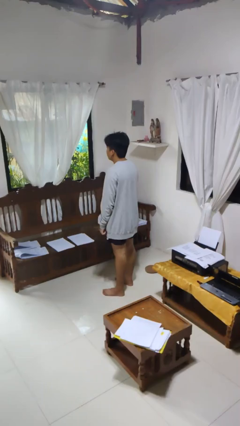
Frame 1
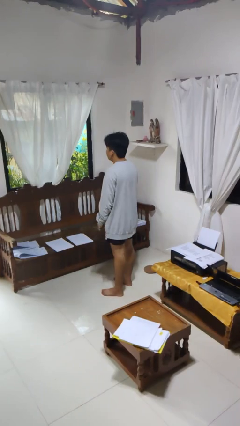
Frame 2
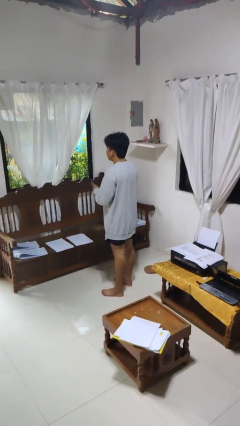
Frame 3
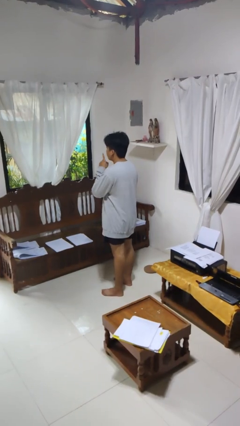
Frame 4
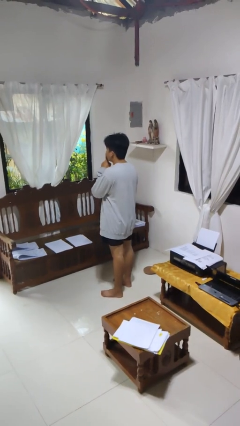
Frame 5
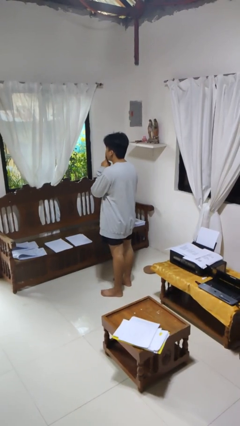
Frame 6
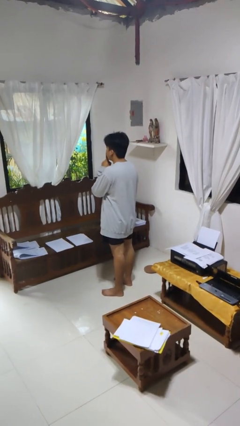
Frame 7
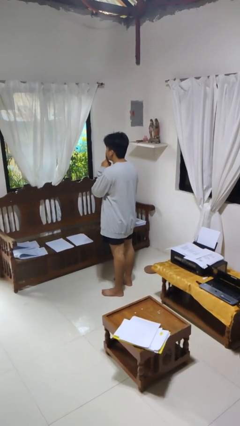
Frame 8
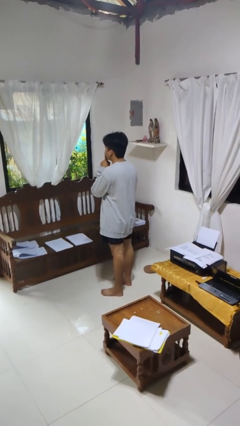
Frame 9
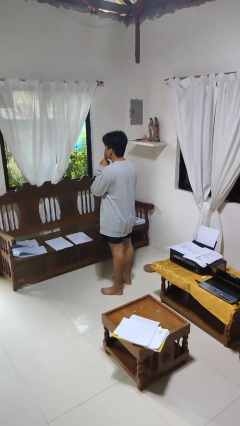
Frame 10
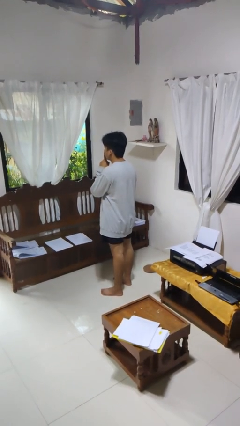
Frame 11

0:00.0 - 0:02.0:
person gestures be quiet

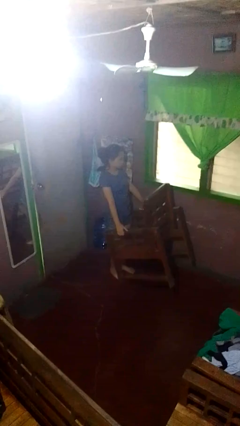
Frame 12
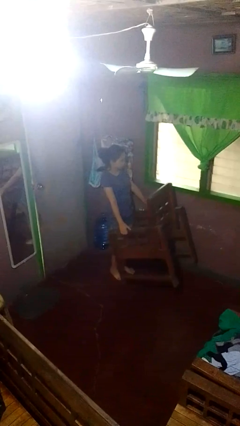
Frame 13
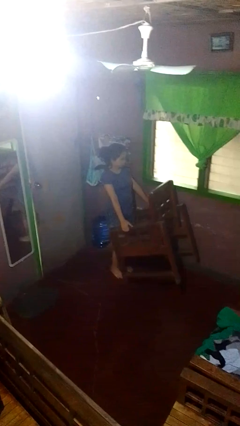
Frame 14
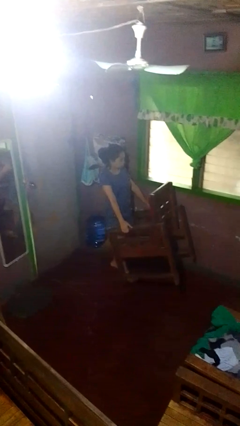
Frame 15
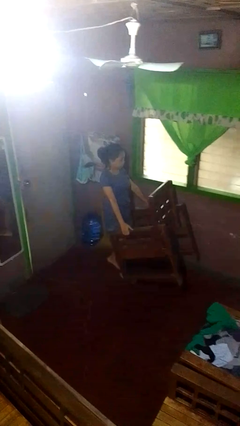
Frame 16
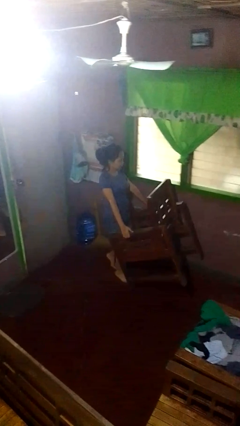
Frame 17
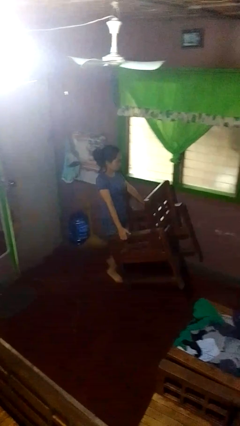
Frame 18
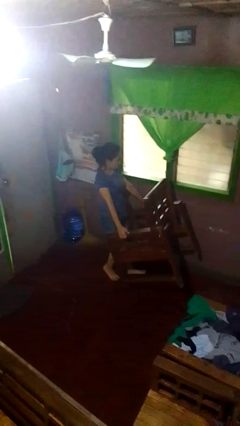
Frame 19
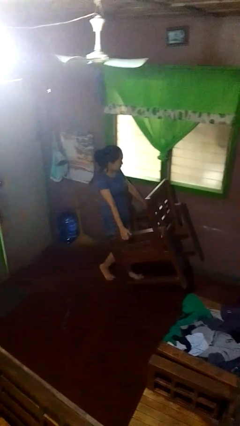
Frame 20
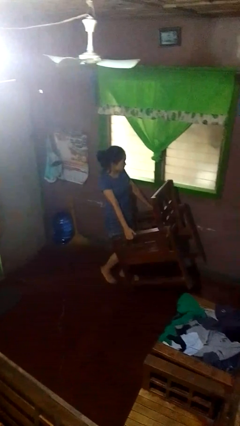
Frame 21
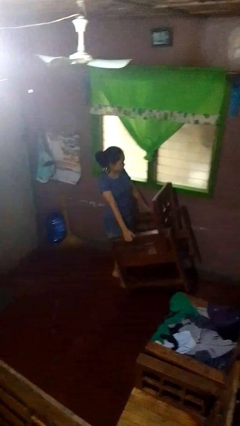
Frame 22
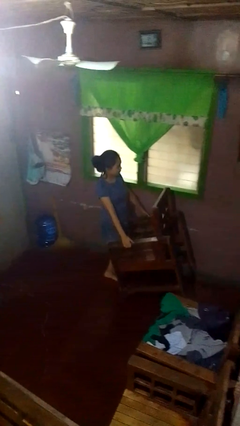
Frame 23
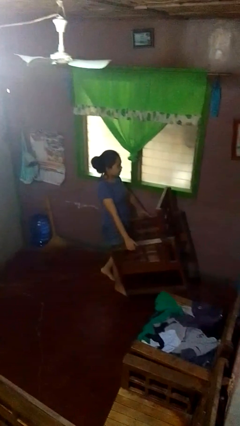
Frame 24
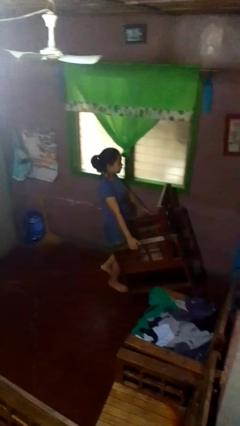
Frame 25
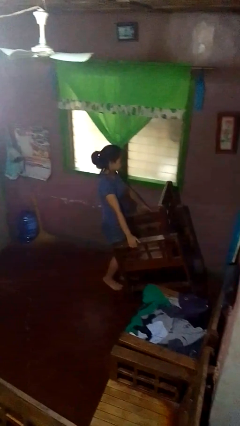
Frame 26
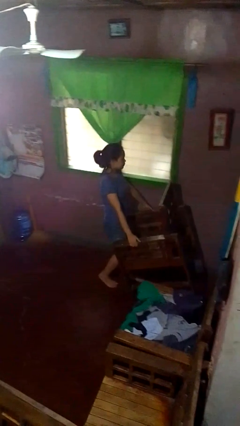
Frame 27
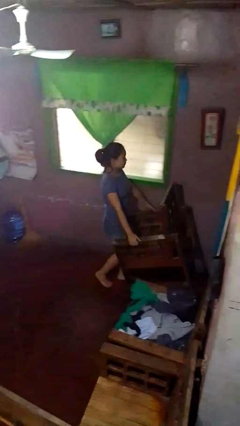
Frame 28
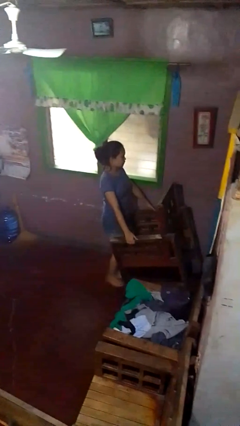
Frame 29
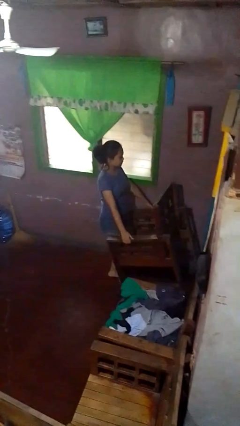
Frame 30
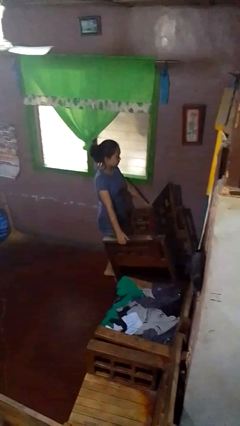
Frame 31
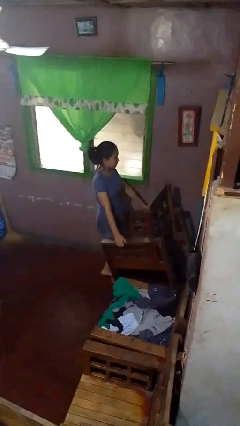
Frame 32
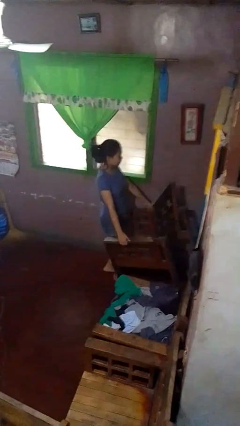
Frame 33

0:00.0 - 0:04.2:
person carries furniture

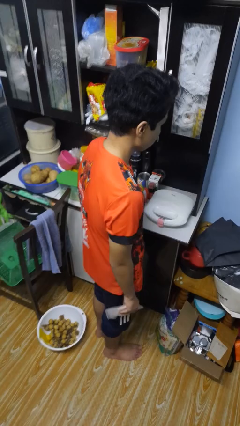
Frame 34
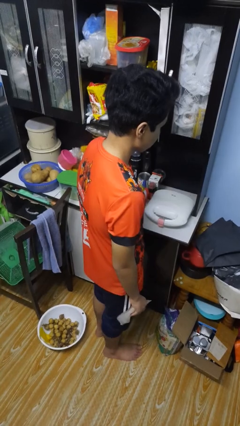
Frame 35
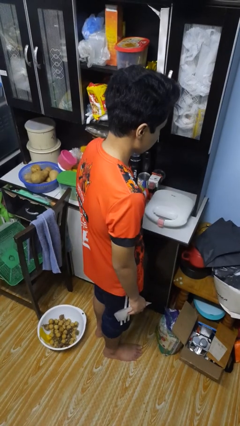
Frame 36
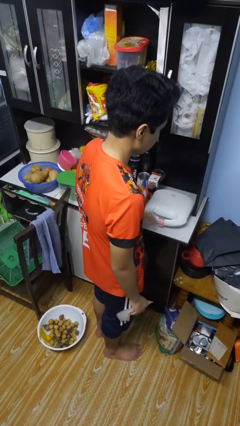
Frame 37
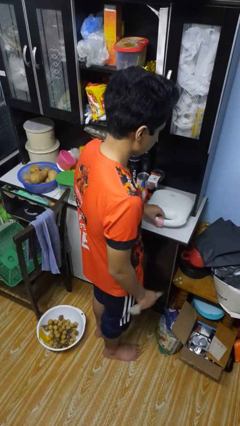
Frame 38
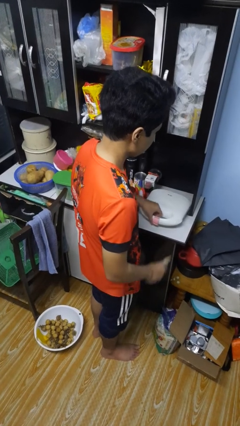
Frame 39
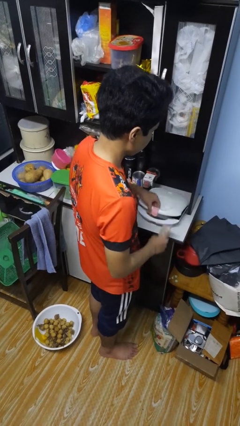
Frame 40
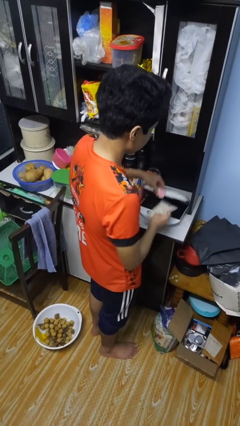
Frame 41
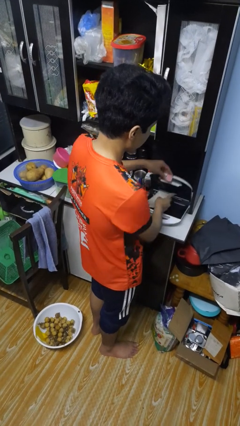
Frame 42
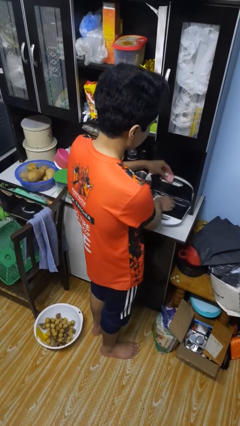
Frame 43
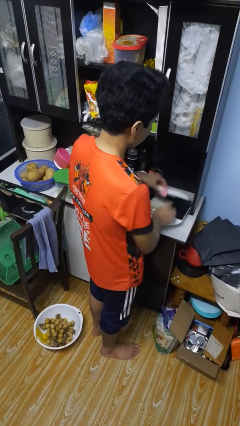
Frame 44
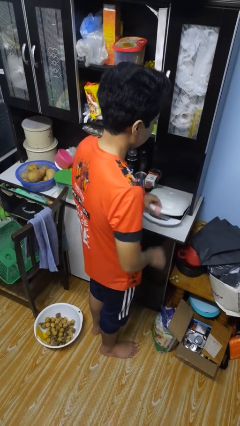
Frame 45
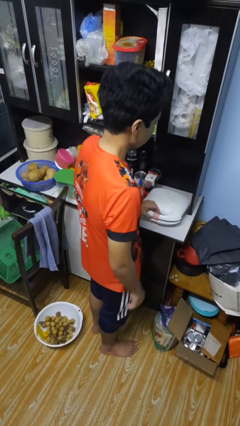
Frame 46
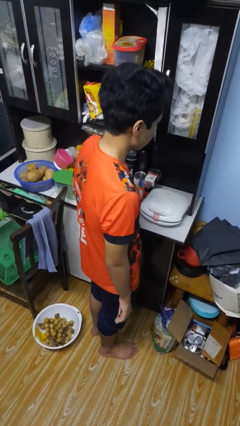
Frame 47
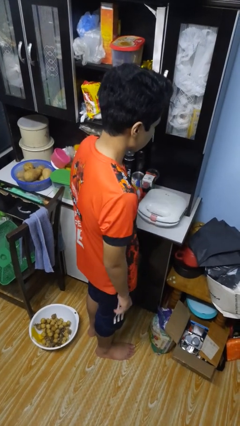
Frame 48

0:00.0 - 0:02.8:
person puts object into toaster

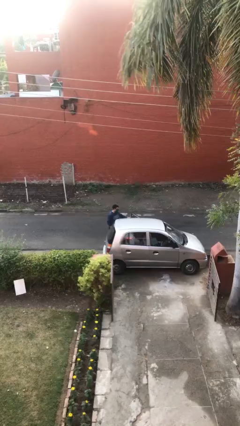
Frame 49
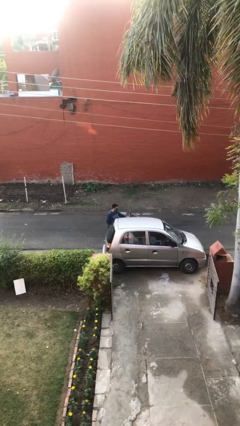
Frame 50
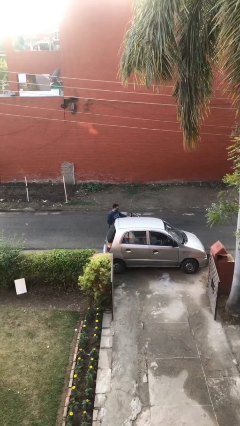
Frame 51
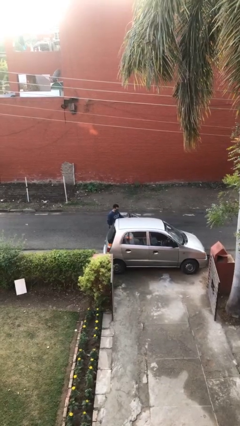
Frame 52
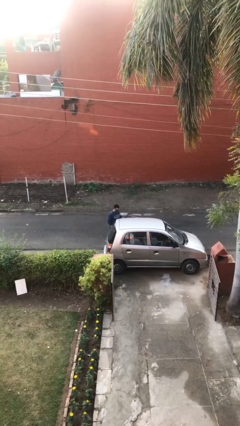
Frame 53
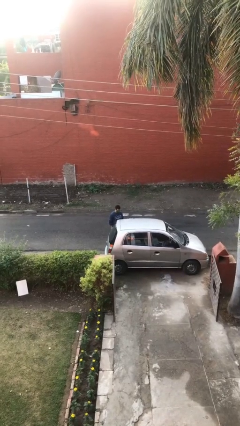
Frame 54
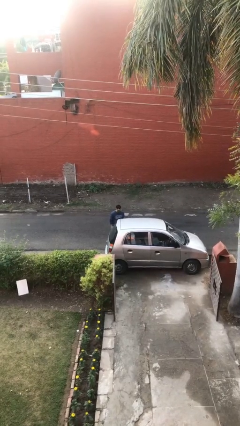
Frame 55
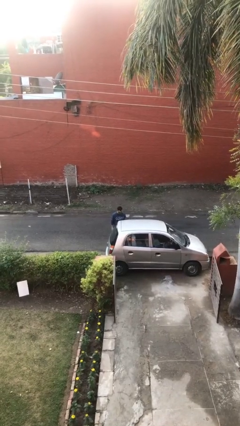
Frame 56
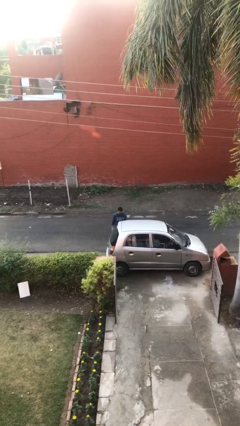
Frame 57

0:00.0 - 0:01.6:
person closes car door

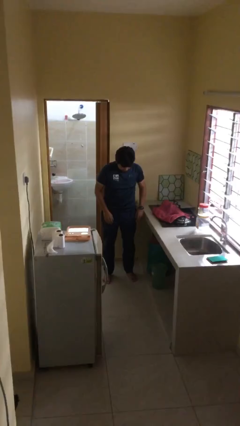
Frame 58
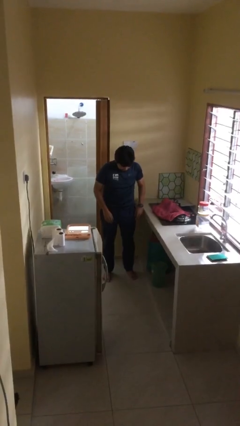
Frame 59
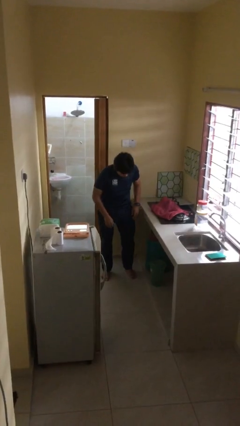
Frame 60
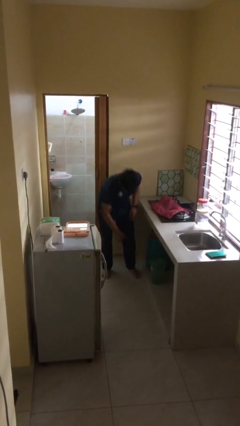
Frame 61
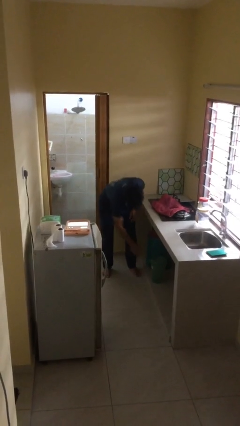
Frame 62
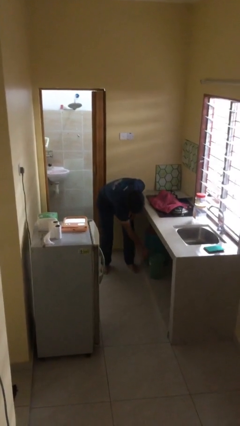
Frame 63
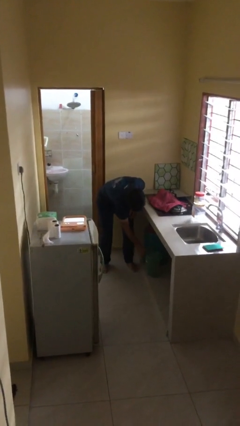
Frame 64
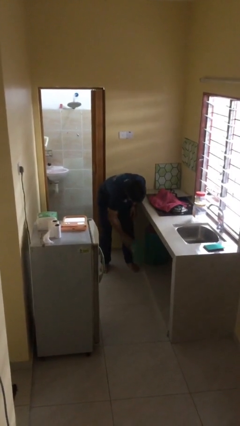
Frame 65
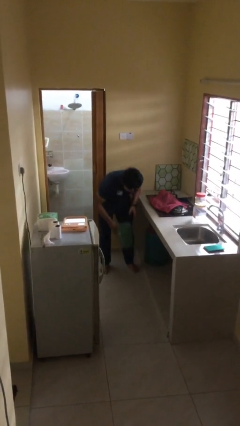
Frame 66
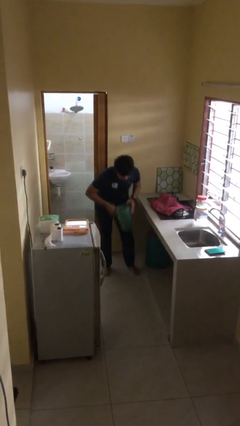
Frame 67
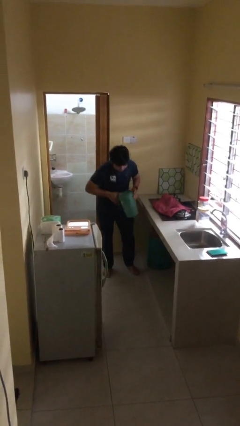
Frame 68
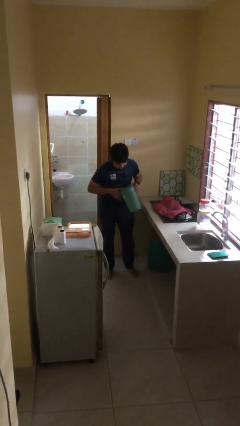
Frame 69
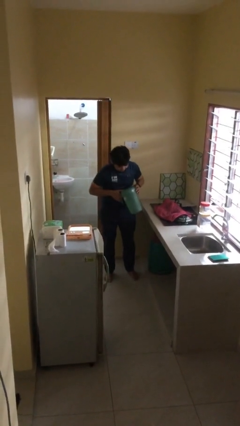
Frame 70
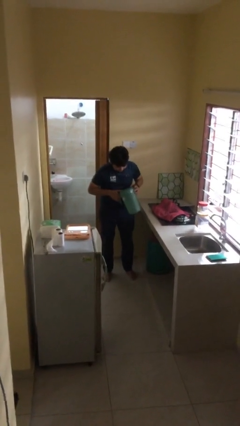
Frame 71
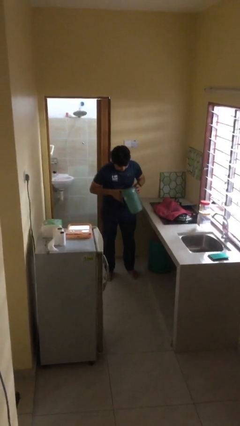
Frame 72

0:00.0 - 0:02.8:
person picks up object from cabinet

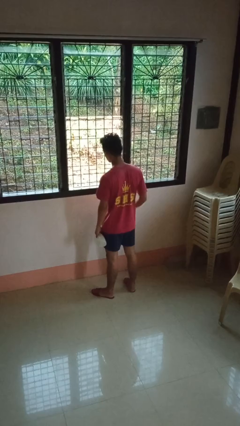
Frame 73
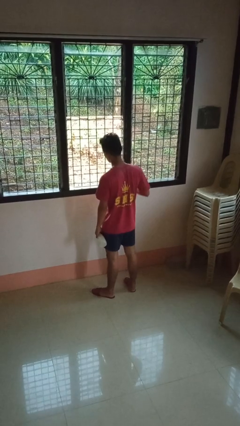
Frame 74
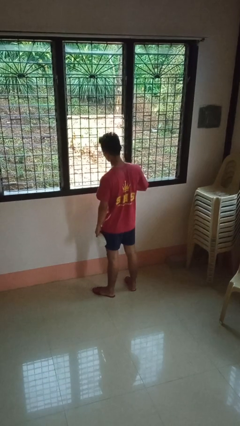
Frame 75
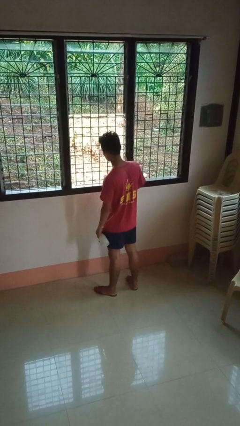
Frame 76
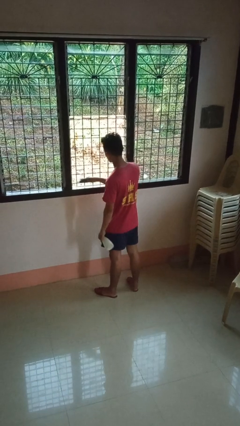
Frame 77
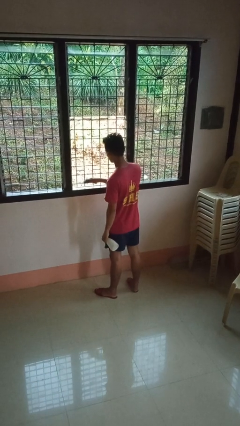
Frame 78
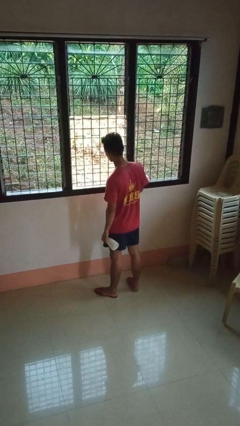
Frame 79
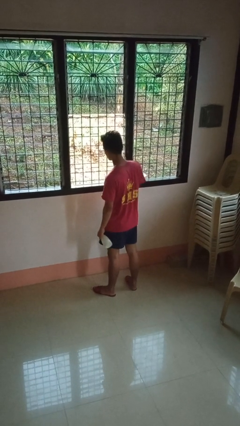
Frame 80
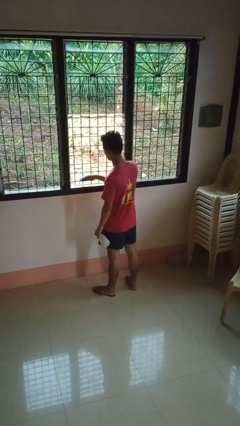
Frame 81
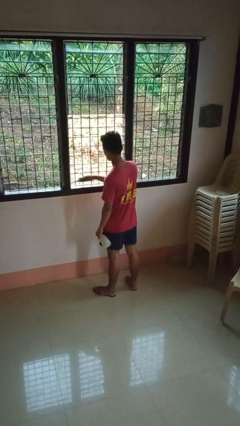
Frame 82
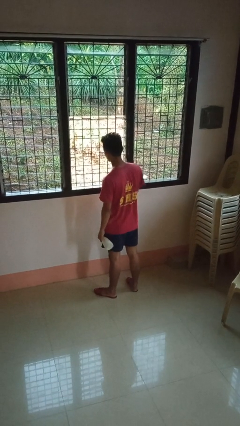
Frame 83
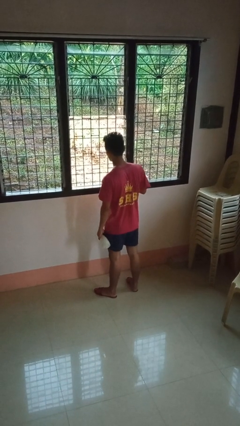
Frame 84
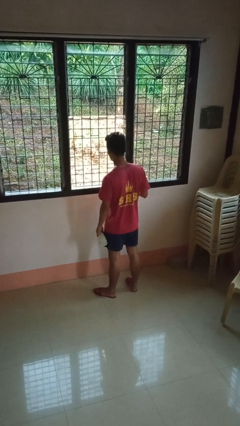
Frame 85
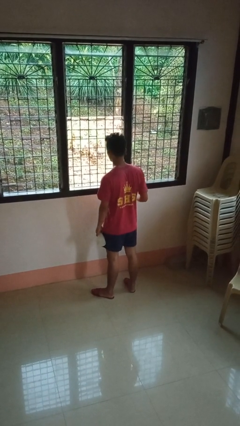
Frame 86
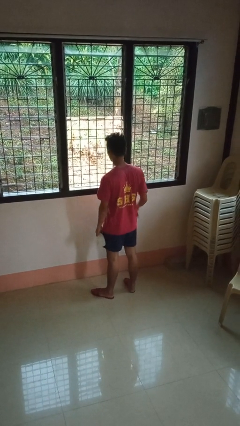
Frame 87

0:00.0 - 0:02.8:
person washes window

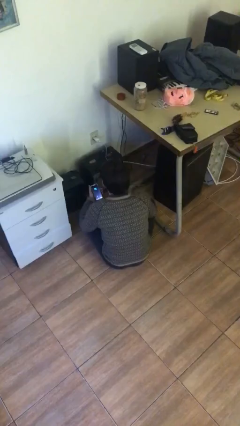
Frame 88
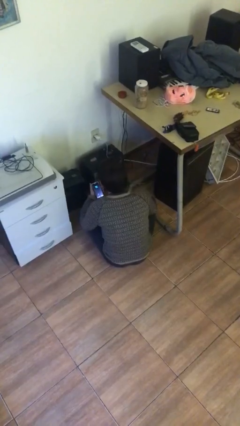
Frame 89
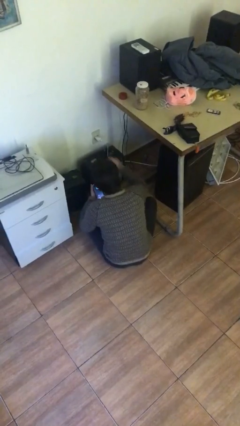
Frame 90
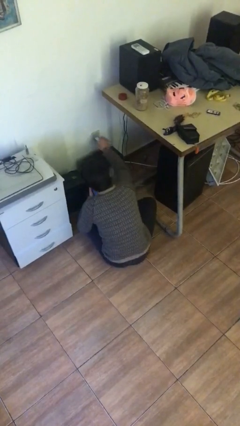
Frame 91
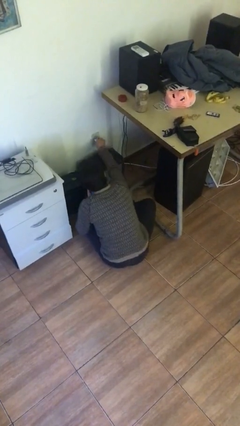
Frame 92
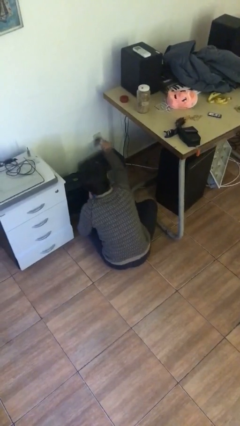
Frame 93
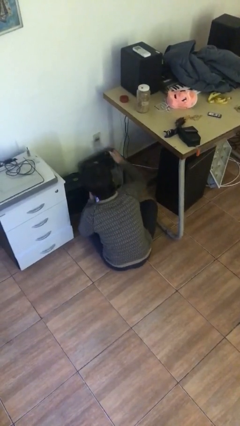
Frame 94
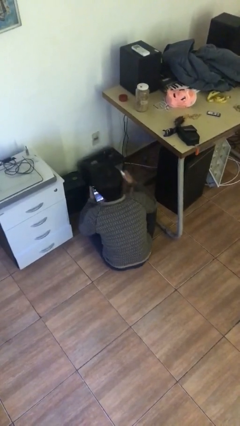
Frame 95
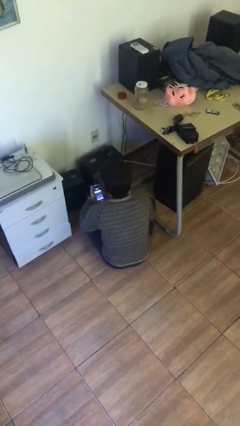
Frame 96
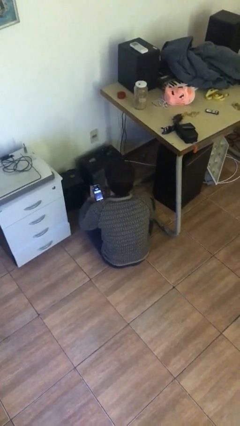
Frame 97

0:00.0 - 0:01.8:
person unplugs from electrical socket
